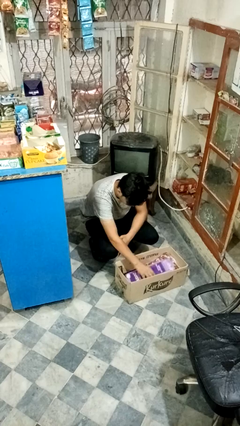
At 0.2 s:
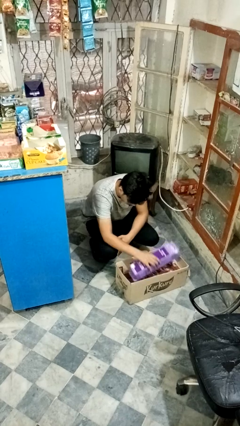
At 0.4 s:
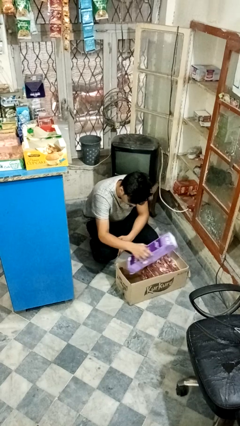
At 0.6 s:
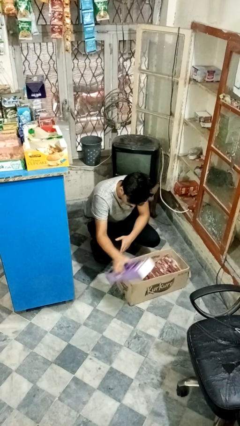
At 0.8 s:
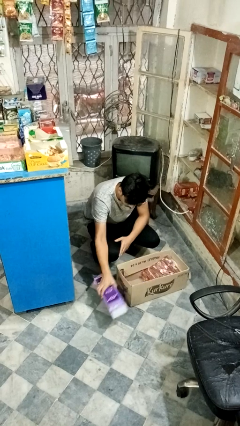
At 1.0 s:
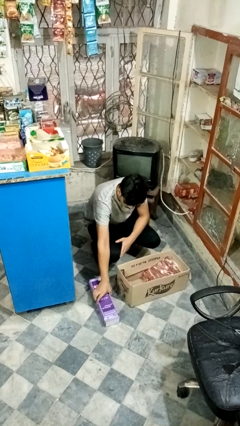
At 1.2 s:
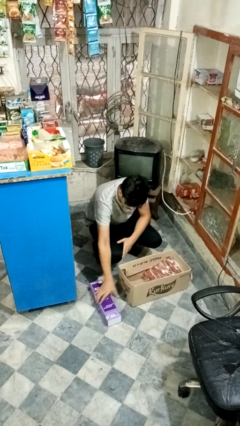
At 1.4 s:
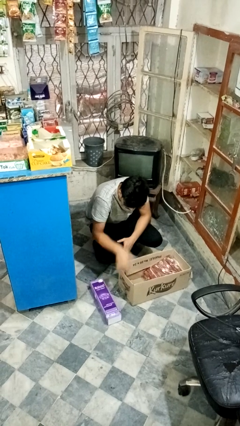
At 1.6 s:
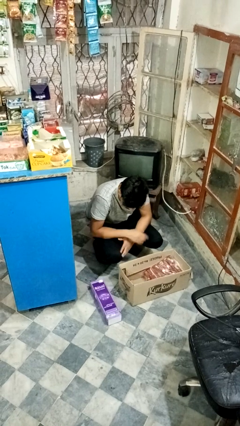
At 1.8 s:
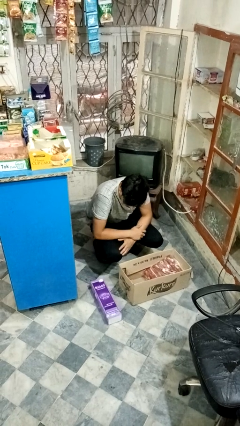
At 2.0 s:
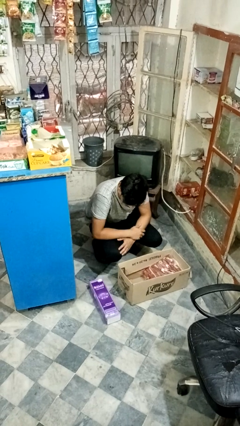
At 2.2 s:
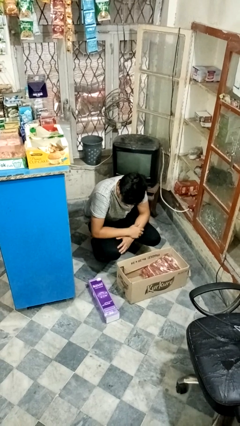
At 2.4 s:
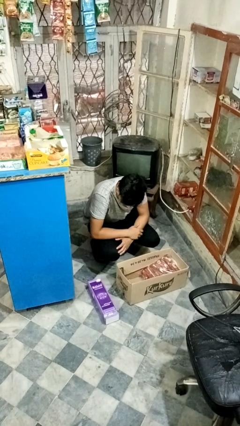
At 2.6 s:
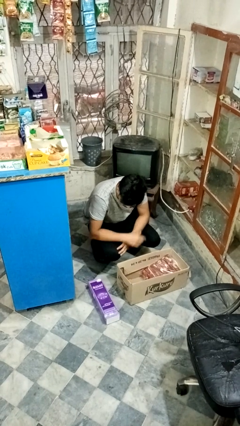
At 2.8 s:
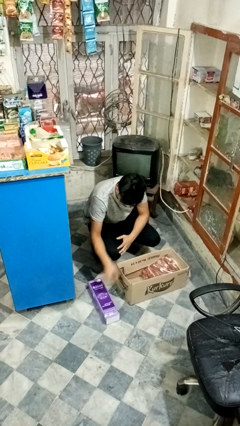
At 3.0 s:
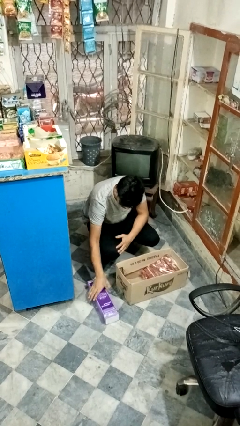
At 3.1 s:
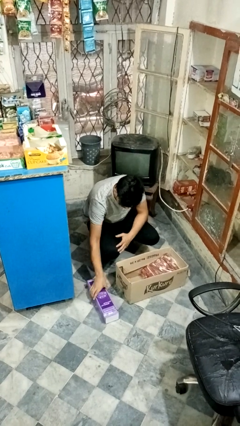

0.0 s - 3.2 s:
person takes object from box

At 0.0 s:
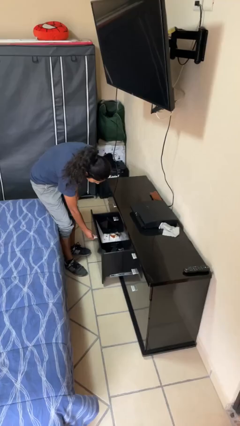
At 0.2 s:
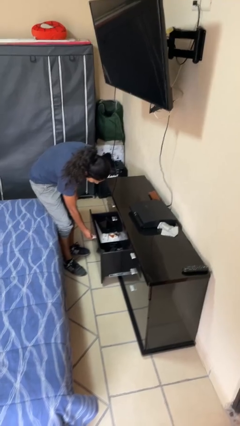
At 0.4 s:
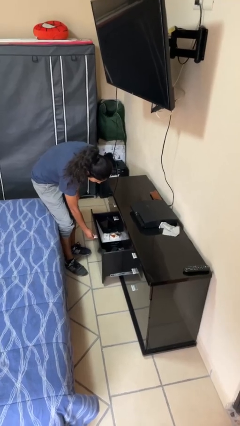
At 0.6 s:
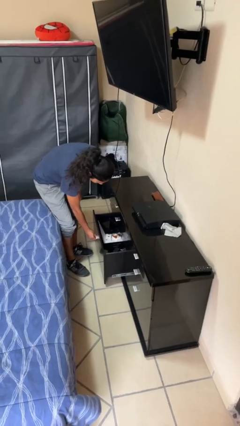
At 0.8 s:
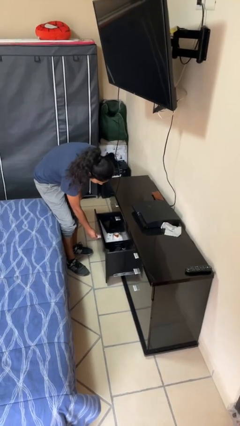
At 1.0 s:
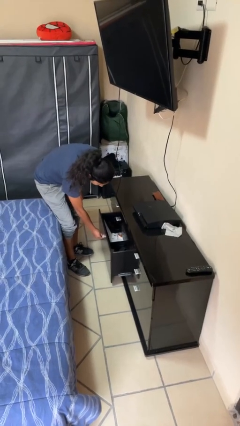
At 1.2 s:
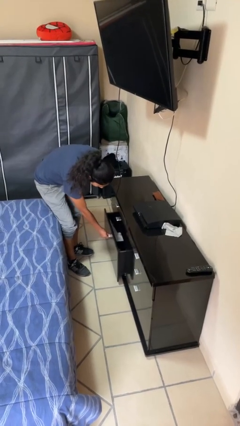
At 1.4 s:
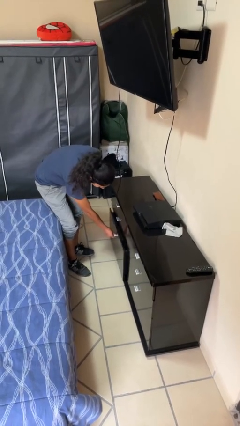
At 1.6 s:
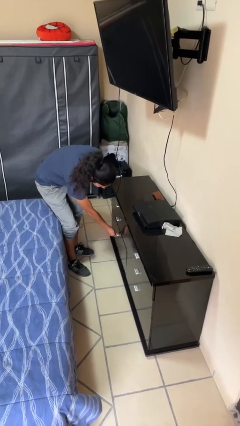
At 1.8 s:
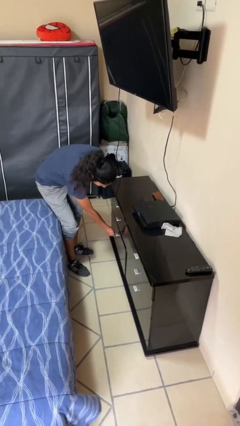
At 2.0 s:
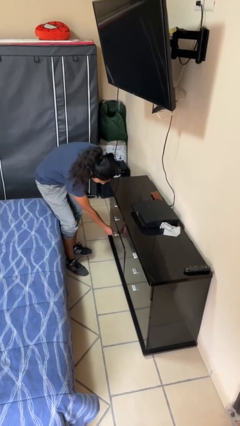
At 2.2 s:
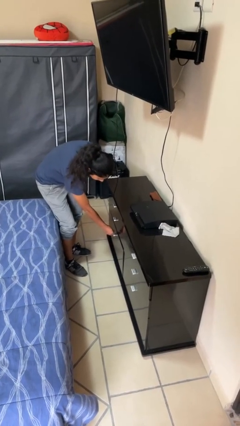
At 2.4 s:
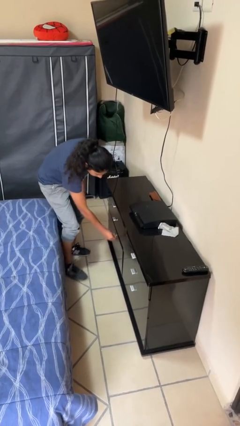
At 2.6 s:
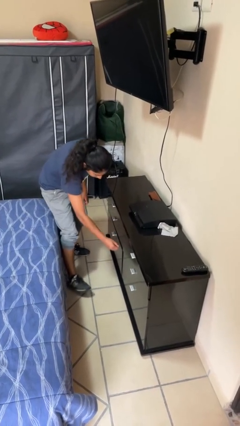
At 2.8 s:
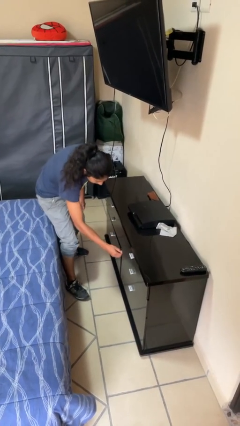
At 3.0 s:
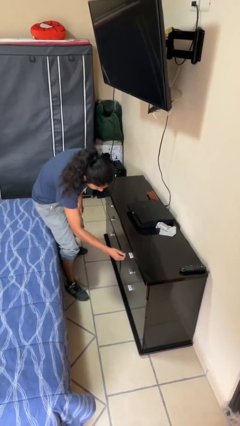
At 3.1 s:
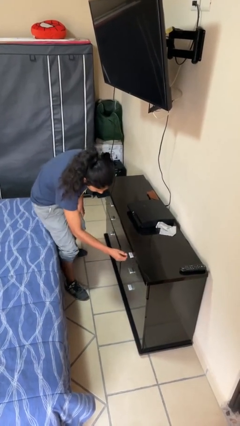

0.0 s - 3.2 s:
person closes dresser drawer

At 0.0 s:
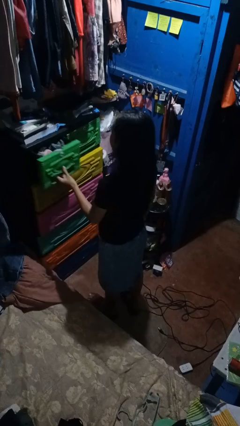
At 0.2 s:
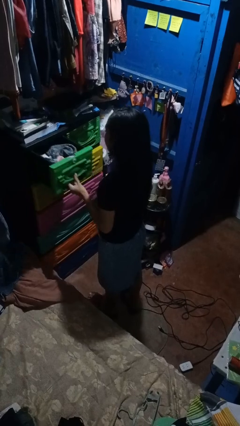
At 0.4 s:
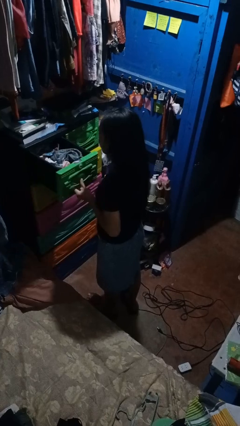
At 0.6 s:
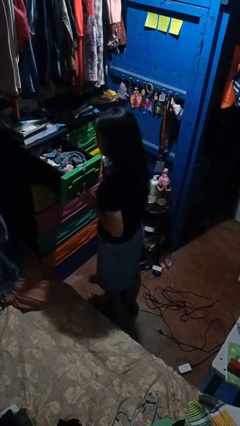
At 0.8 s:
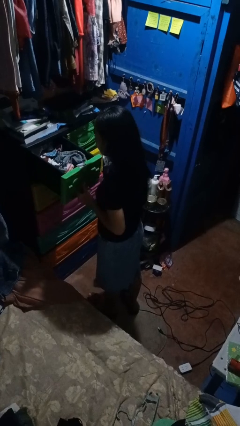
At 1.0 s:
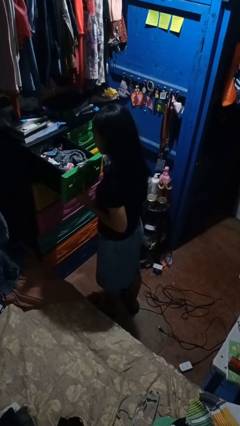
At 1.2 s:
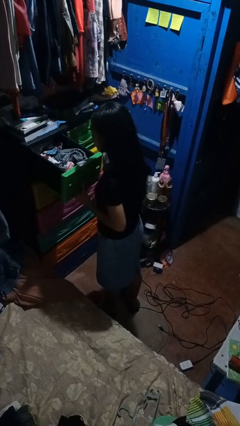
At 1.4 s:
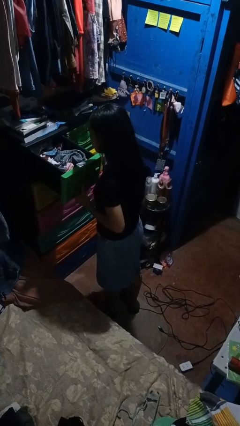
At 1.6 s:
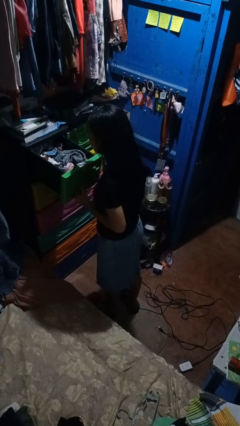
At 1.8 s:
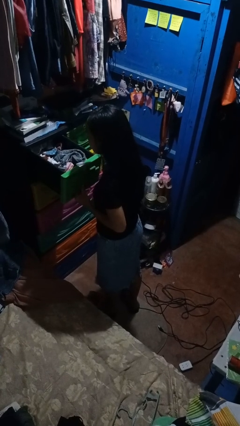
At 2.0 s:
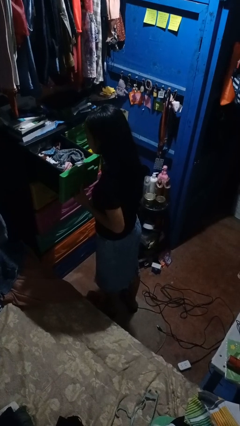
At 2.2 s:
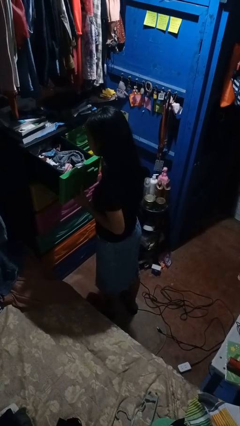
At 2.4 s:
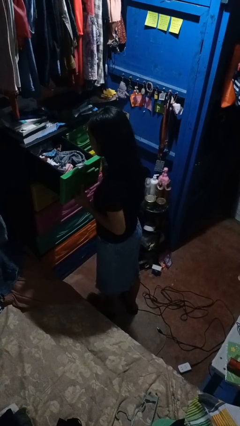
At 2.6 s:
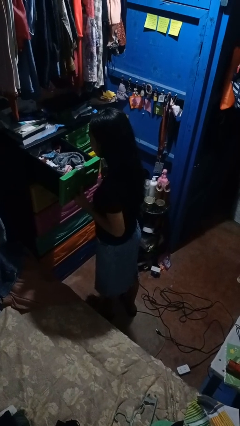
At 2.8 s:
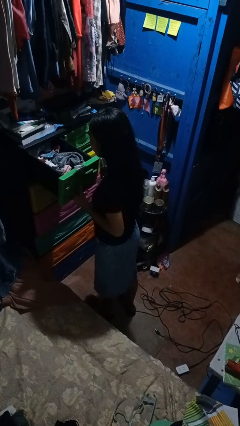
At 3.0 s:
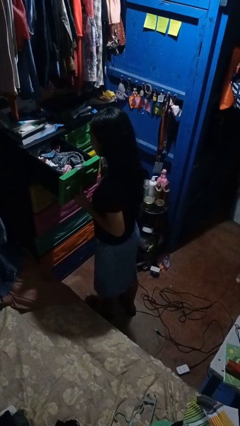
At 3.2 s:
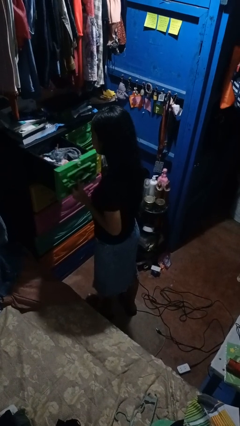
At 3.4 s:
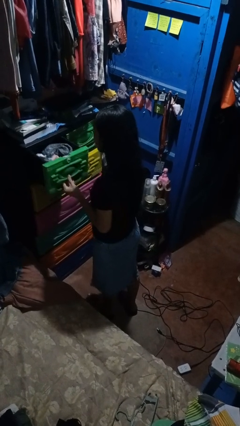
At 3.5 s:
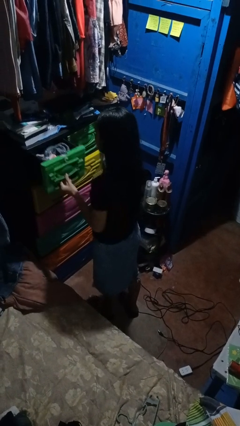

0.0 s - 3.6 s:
person opens dresser drawer

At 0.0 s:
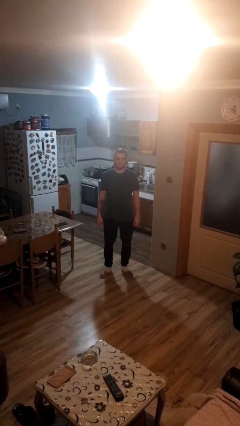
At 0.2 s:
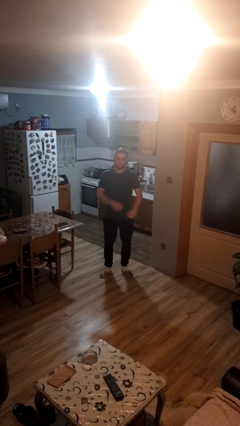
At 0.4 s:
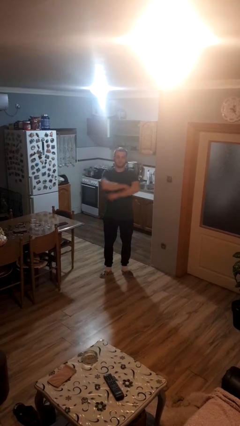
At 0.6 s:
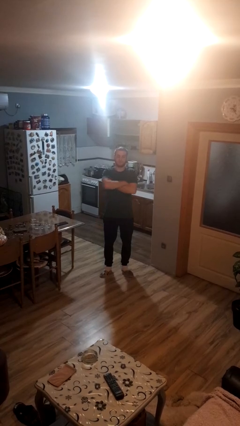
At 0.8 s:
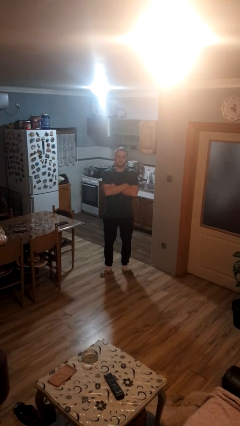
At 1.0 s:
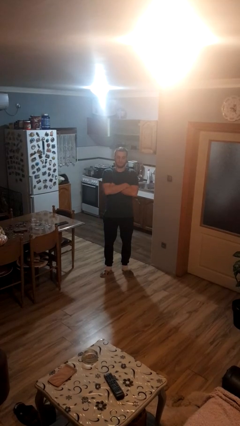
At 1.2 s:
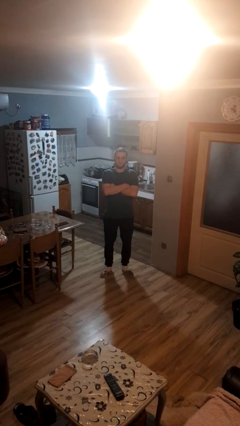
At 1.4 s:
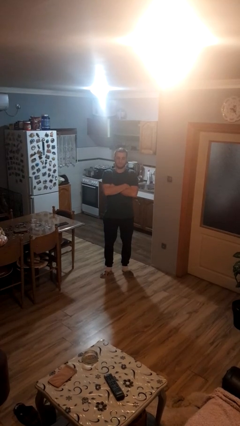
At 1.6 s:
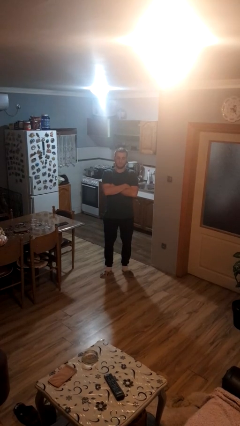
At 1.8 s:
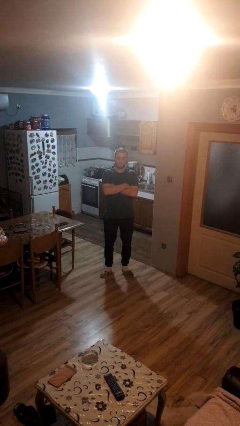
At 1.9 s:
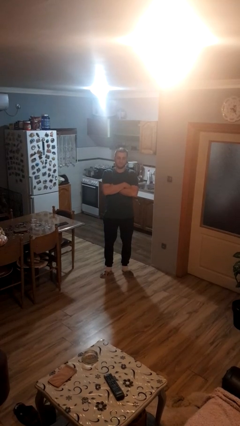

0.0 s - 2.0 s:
person crosses arms

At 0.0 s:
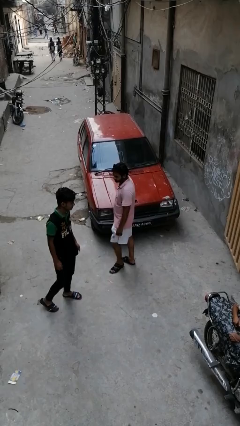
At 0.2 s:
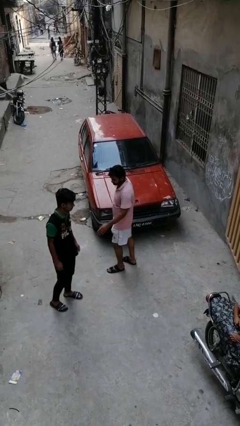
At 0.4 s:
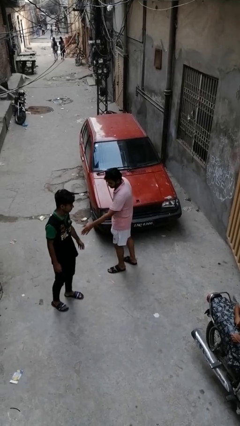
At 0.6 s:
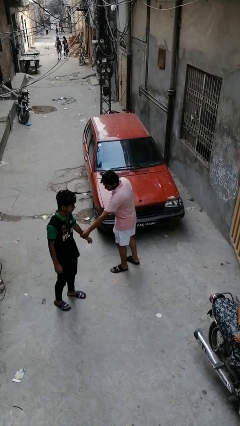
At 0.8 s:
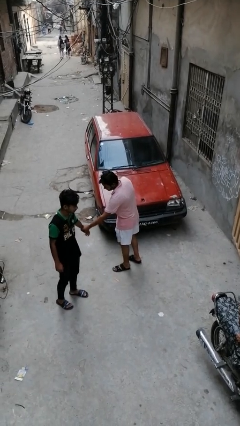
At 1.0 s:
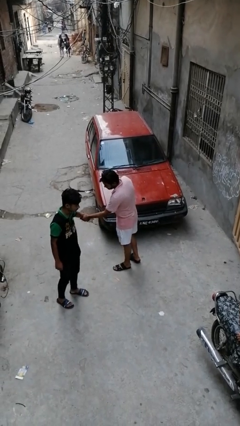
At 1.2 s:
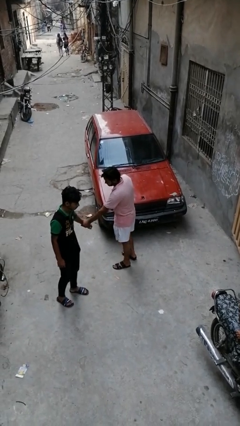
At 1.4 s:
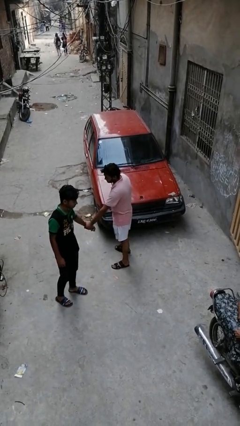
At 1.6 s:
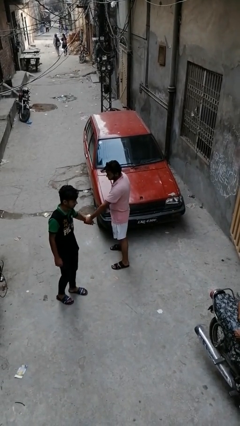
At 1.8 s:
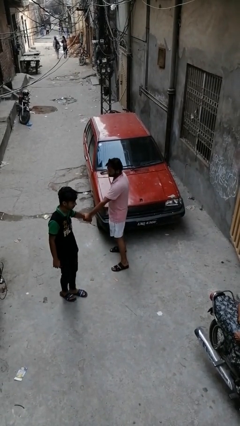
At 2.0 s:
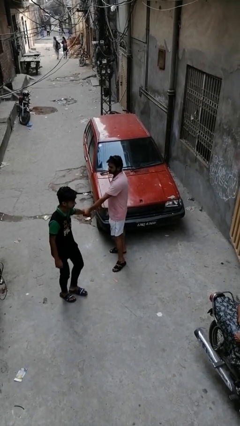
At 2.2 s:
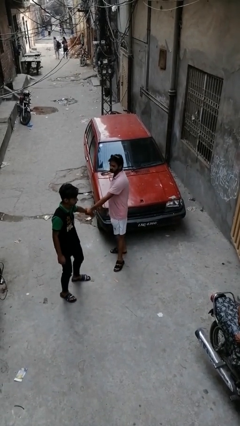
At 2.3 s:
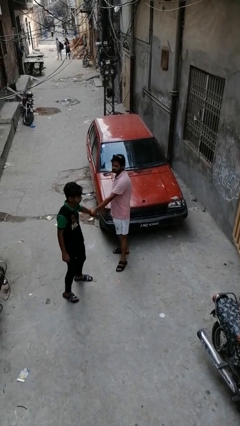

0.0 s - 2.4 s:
person grabs person by forearm

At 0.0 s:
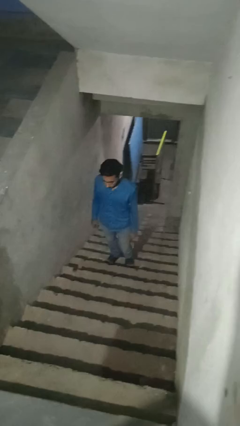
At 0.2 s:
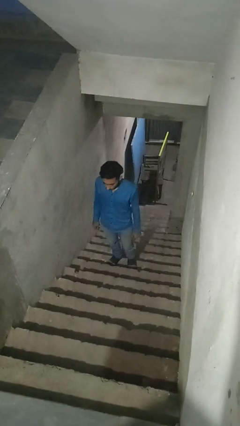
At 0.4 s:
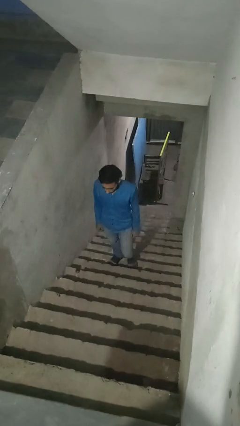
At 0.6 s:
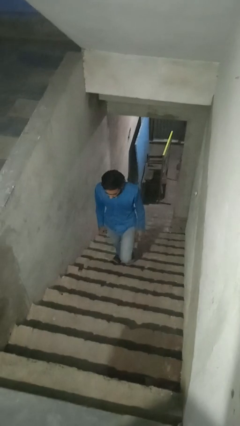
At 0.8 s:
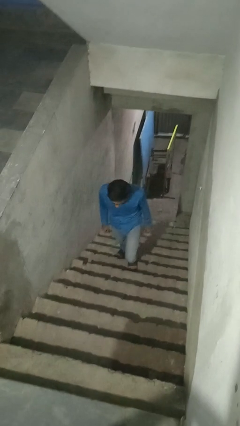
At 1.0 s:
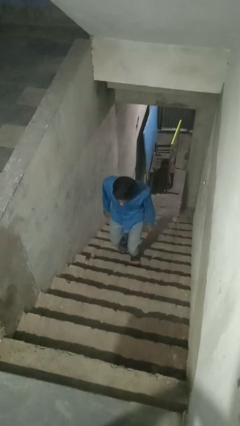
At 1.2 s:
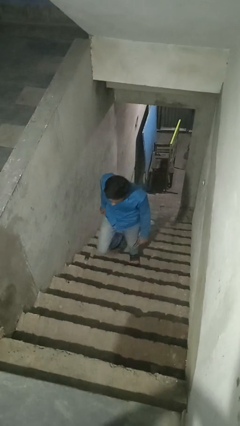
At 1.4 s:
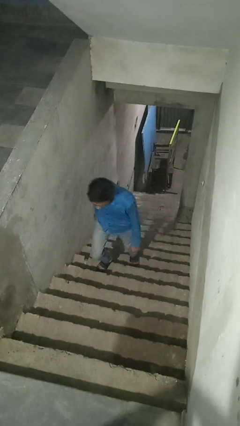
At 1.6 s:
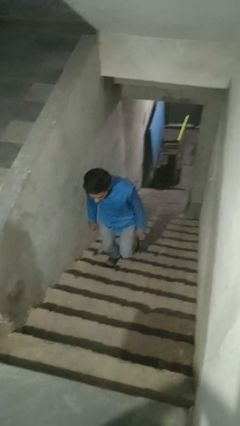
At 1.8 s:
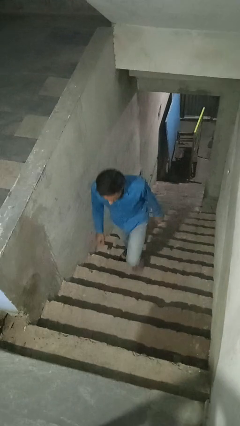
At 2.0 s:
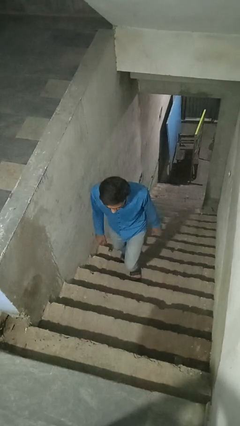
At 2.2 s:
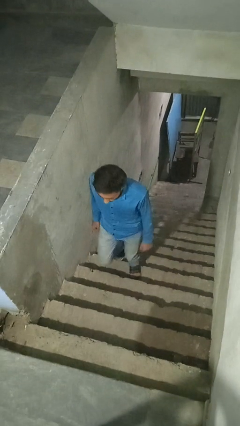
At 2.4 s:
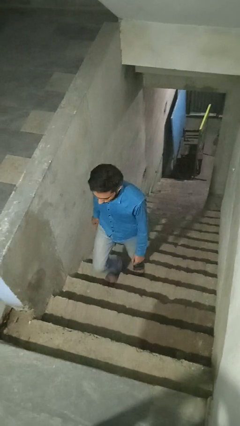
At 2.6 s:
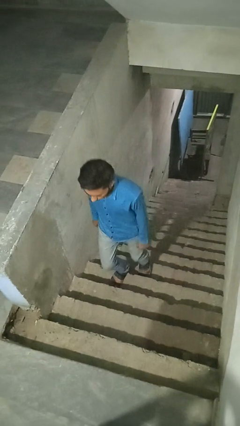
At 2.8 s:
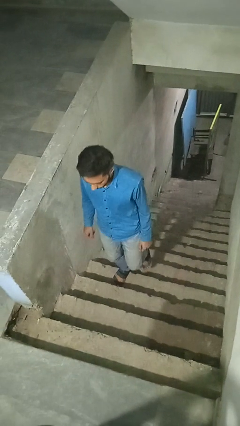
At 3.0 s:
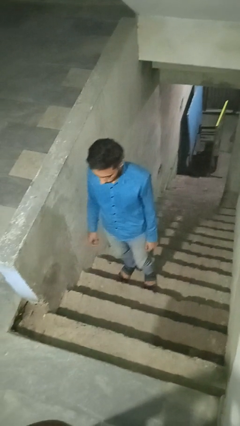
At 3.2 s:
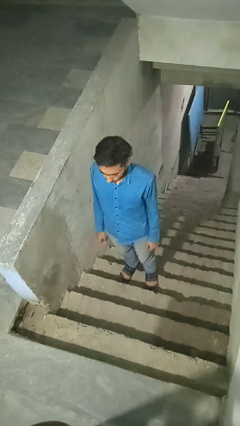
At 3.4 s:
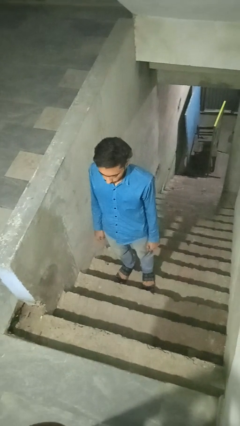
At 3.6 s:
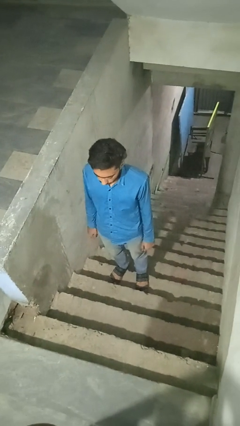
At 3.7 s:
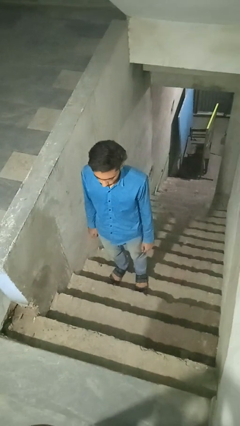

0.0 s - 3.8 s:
person climbs up stairs
